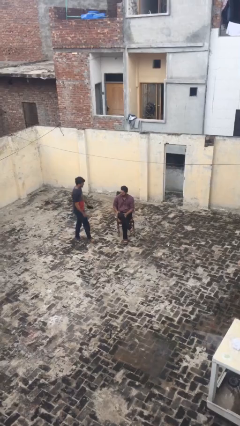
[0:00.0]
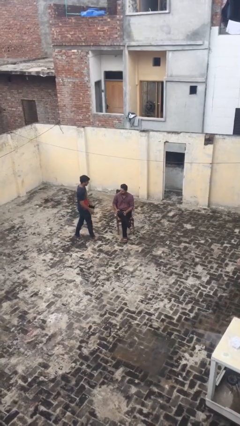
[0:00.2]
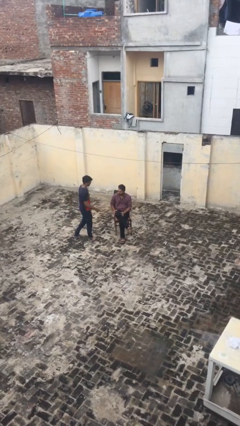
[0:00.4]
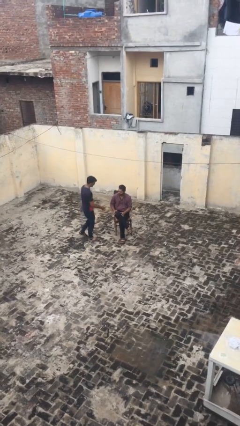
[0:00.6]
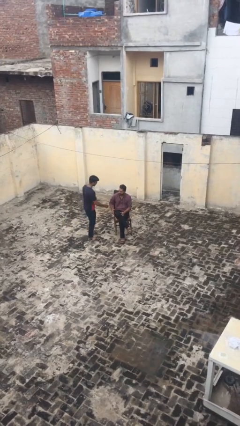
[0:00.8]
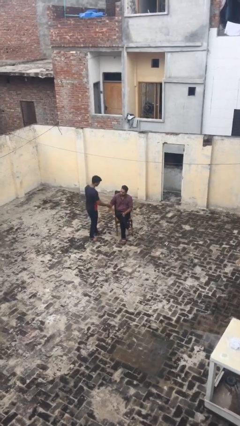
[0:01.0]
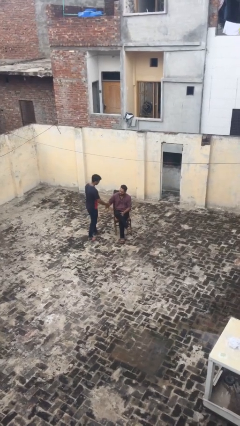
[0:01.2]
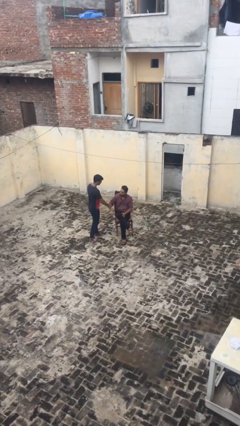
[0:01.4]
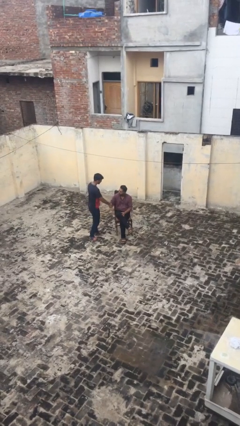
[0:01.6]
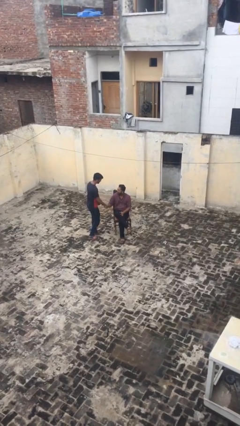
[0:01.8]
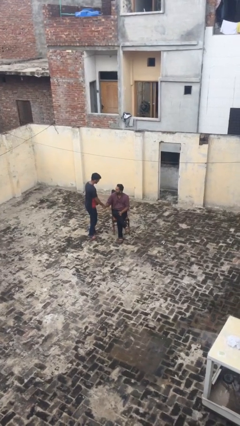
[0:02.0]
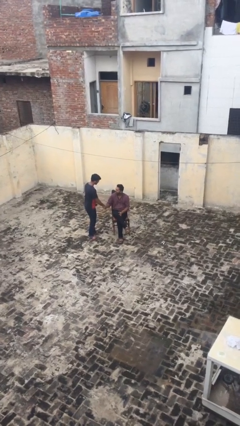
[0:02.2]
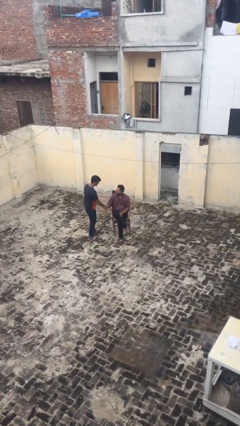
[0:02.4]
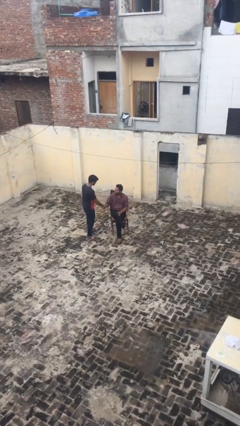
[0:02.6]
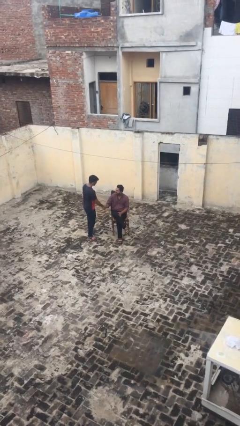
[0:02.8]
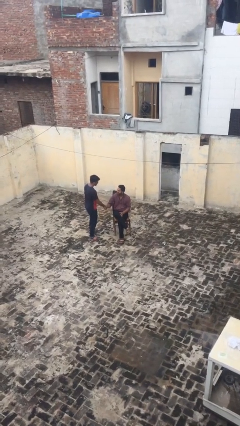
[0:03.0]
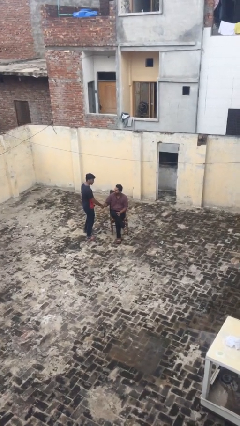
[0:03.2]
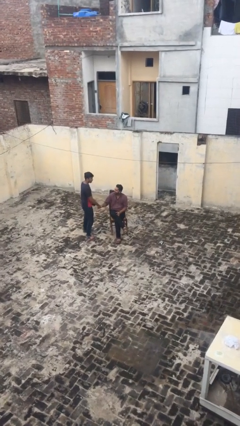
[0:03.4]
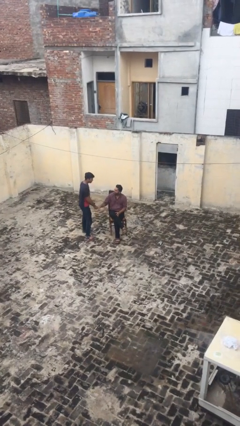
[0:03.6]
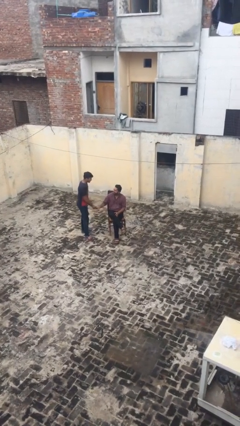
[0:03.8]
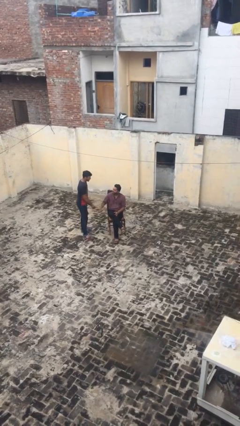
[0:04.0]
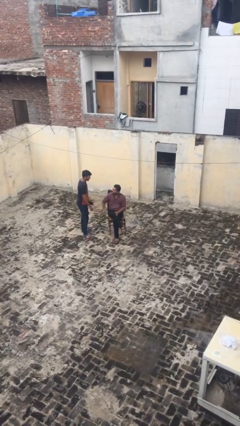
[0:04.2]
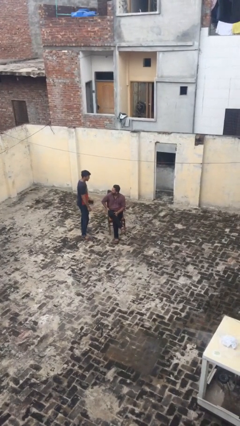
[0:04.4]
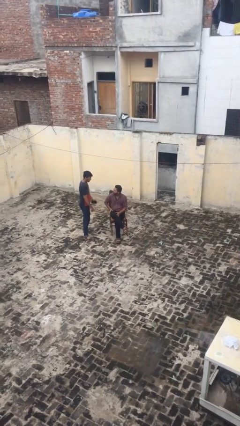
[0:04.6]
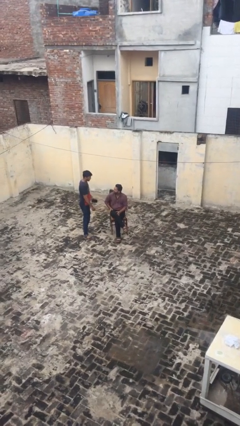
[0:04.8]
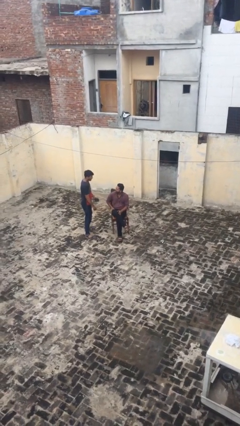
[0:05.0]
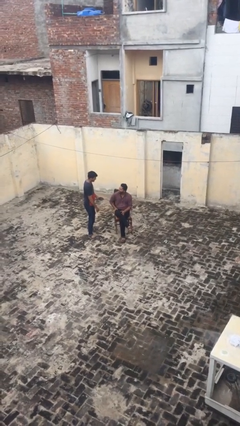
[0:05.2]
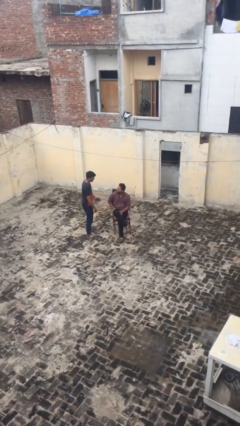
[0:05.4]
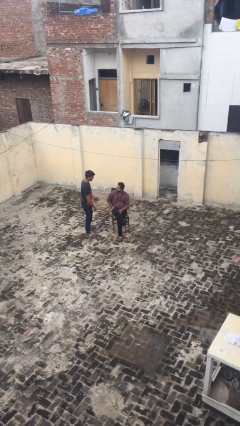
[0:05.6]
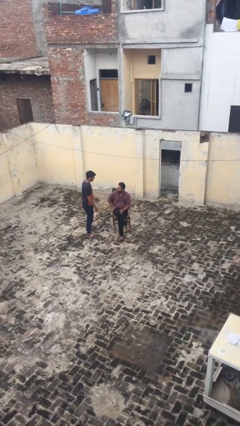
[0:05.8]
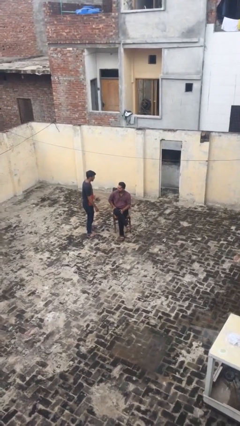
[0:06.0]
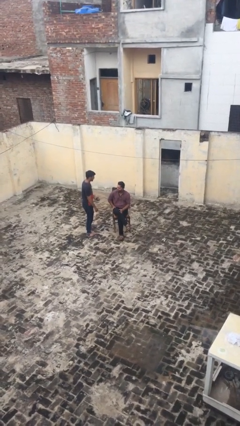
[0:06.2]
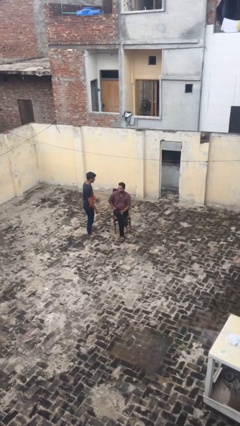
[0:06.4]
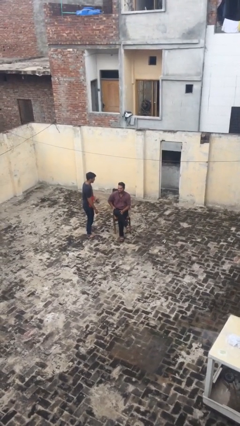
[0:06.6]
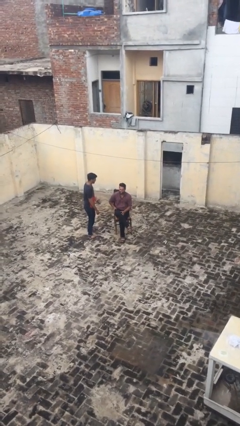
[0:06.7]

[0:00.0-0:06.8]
person shakes hand

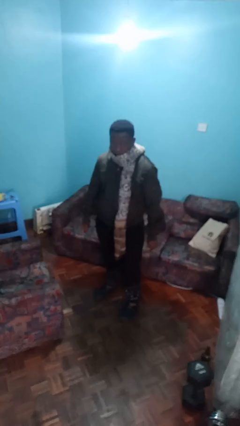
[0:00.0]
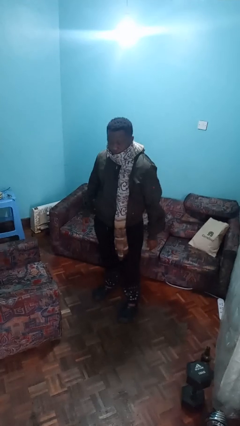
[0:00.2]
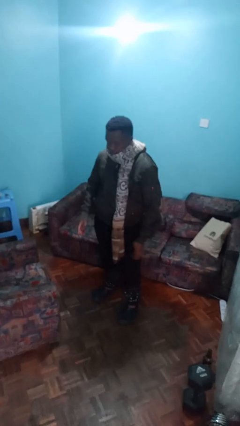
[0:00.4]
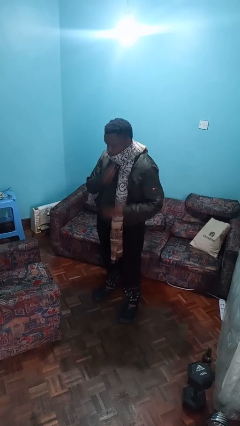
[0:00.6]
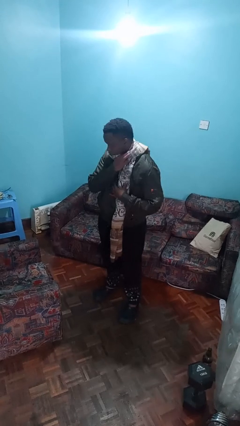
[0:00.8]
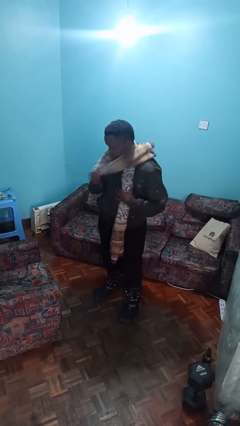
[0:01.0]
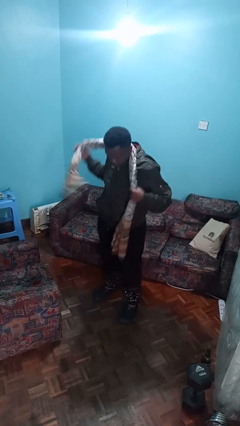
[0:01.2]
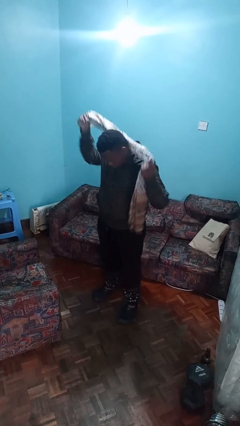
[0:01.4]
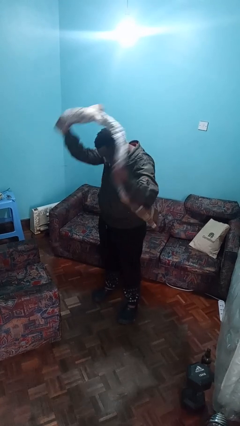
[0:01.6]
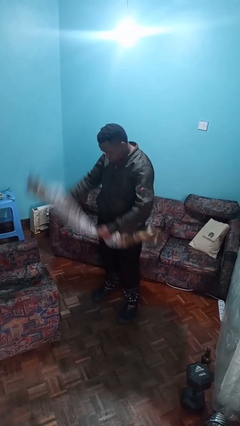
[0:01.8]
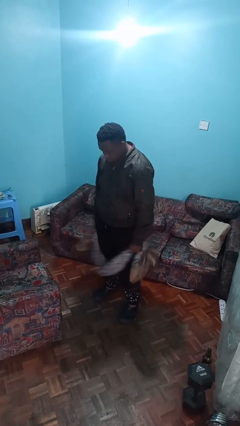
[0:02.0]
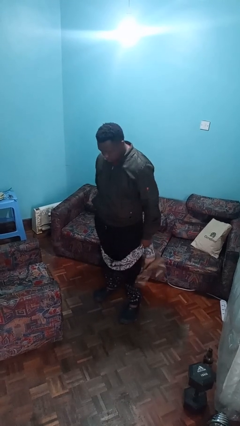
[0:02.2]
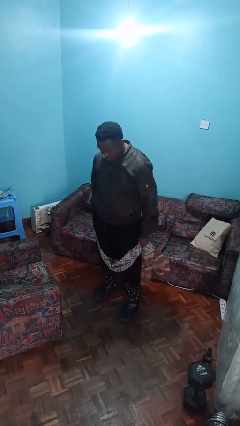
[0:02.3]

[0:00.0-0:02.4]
person takes off scarf

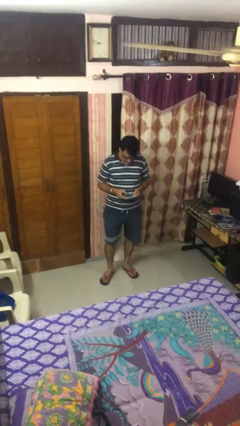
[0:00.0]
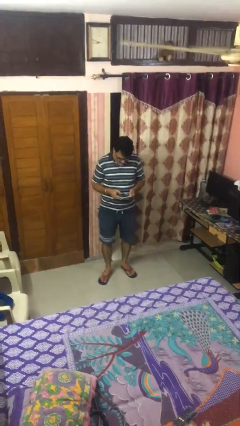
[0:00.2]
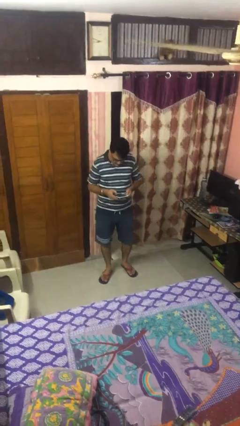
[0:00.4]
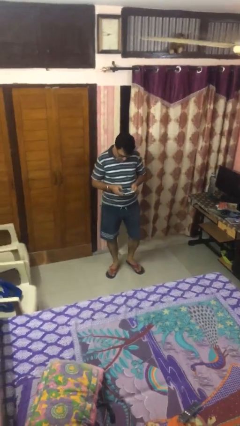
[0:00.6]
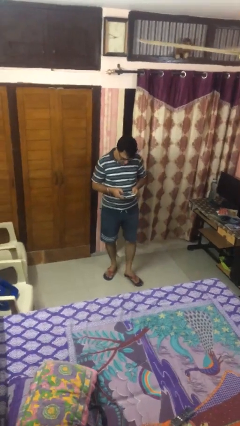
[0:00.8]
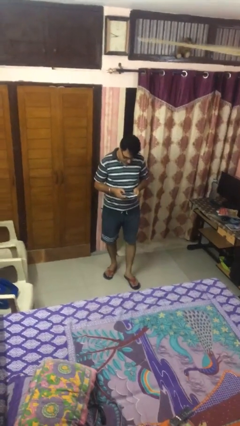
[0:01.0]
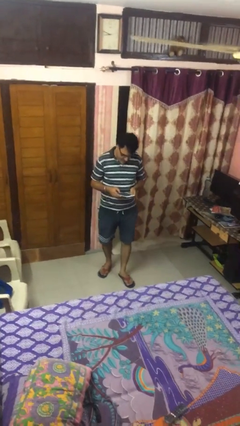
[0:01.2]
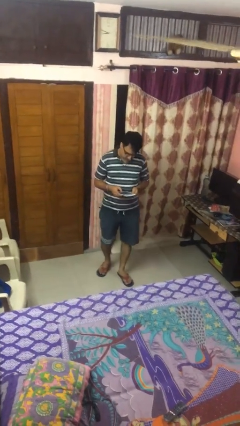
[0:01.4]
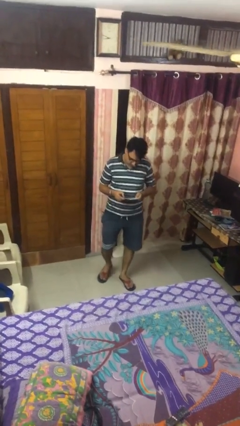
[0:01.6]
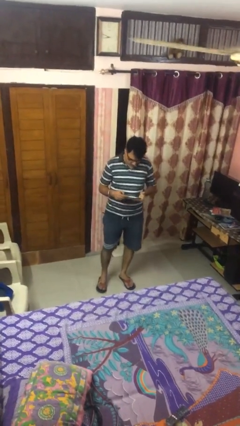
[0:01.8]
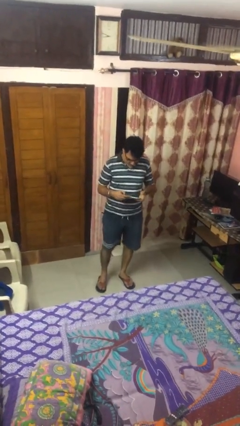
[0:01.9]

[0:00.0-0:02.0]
person interacts with tablet

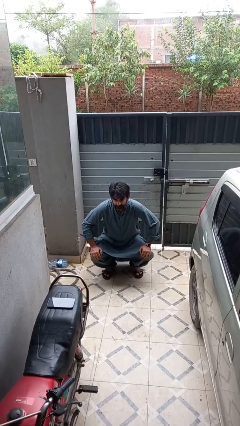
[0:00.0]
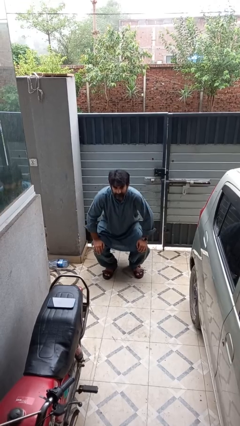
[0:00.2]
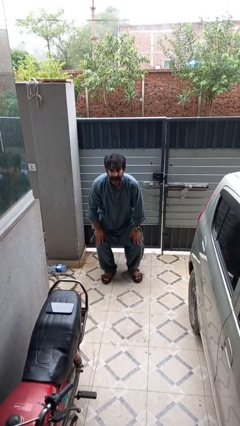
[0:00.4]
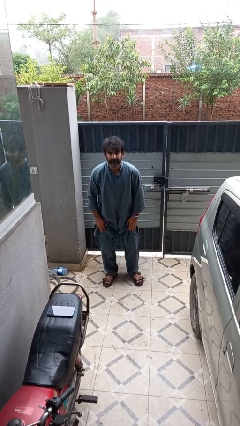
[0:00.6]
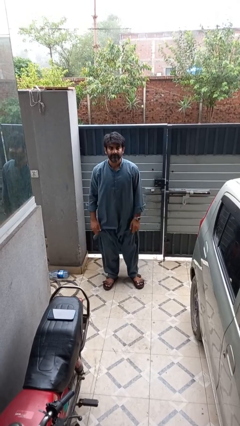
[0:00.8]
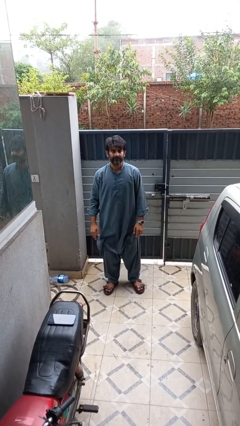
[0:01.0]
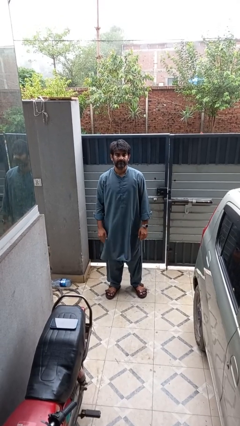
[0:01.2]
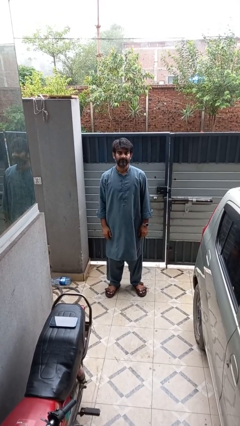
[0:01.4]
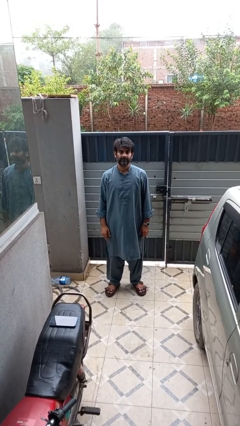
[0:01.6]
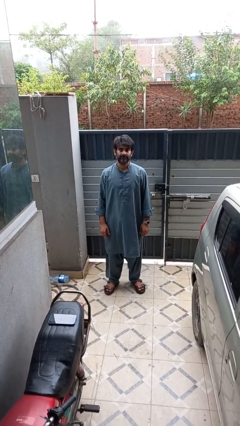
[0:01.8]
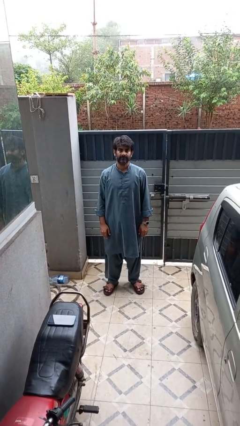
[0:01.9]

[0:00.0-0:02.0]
person stands up

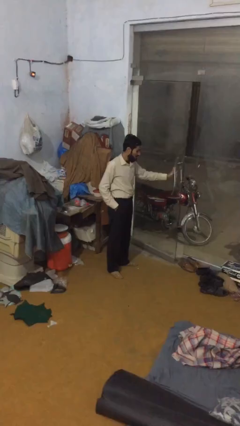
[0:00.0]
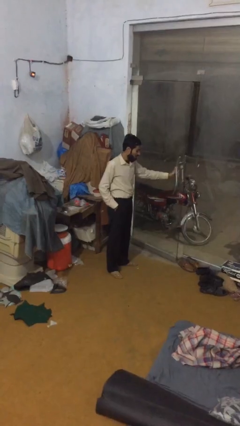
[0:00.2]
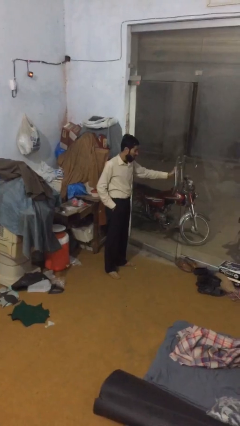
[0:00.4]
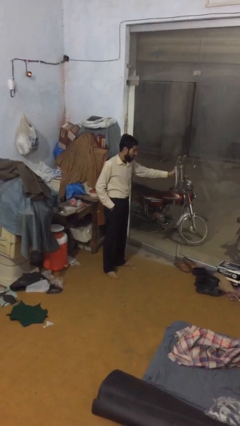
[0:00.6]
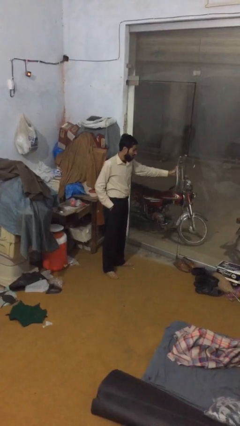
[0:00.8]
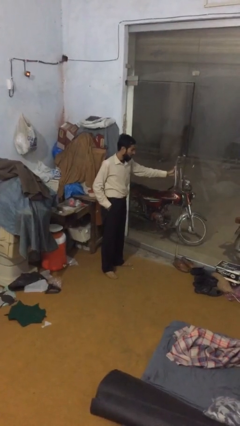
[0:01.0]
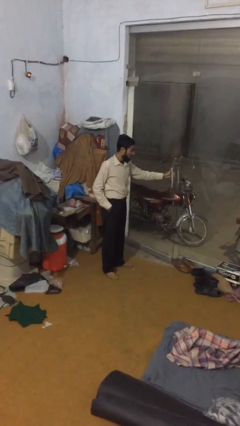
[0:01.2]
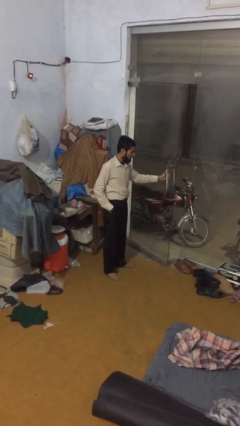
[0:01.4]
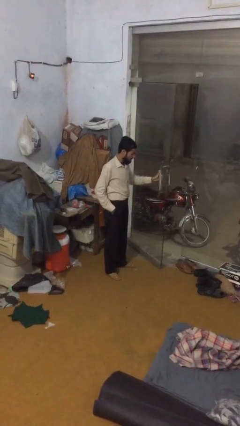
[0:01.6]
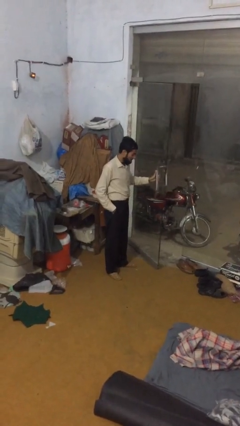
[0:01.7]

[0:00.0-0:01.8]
person opens facility door

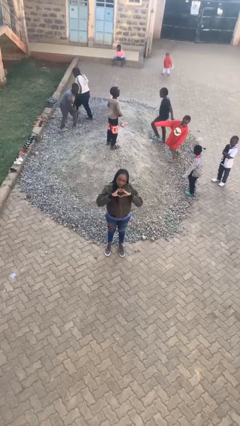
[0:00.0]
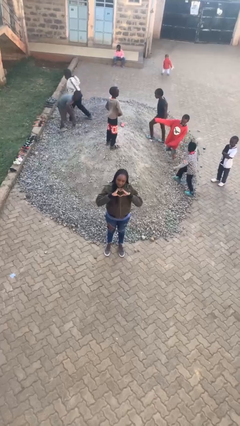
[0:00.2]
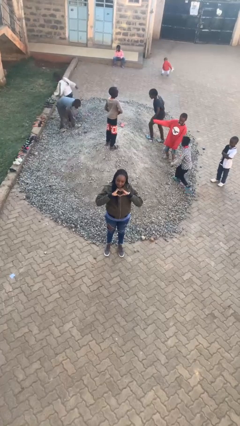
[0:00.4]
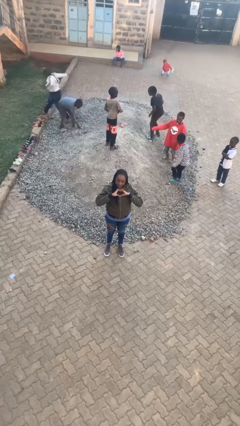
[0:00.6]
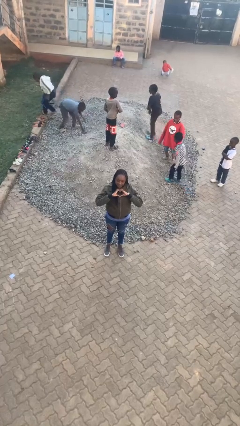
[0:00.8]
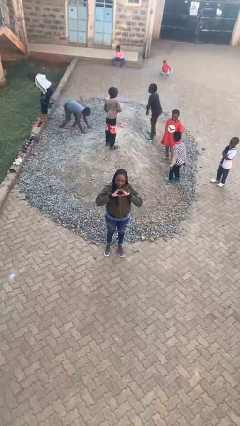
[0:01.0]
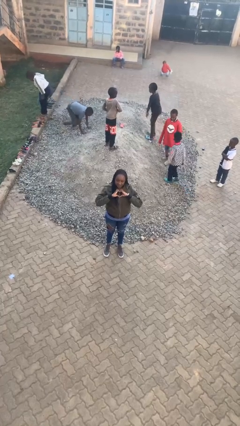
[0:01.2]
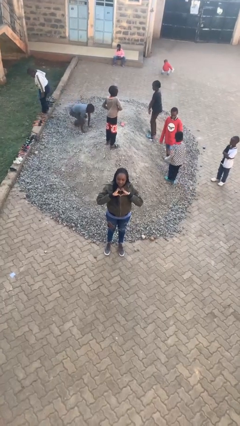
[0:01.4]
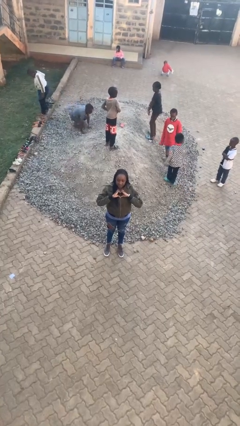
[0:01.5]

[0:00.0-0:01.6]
person gestures heart

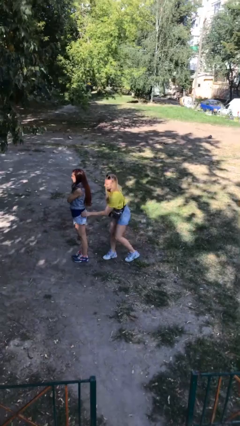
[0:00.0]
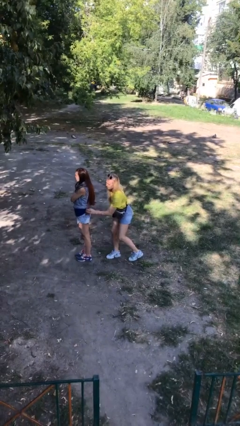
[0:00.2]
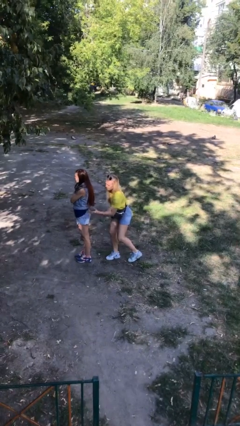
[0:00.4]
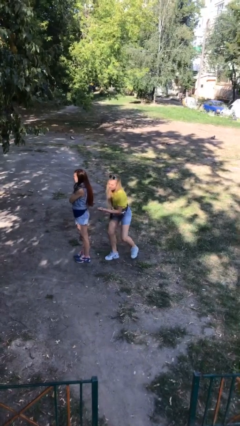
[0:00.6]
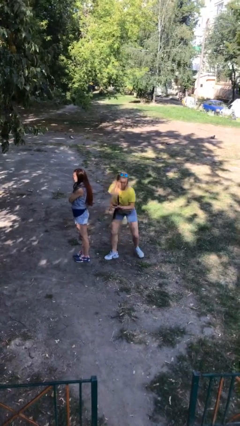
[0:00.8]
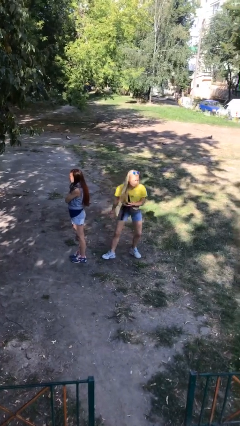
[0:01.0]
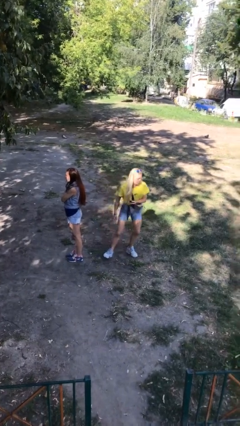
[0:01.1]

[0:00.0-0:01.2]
person steals object from person
